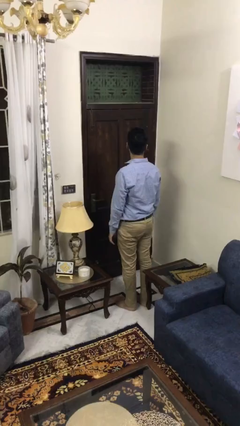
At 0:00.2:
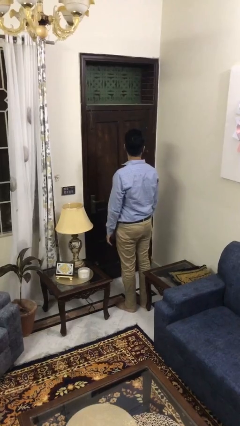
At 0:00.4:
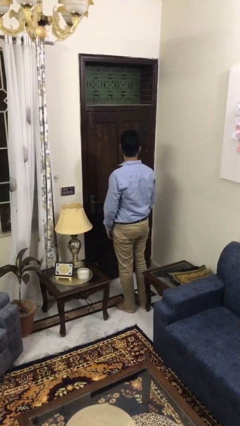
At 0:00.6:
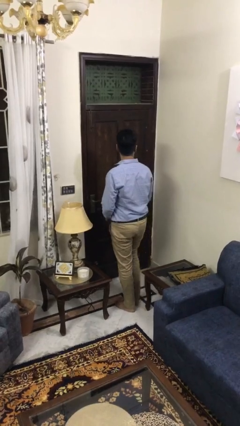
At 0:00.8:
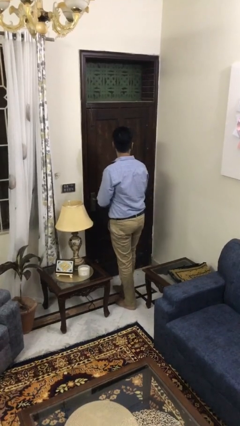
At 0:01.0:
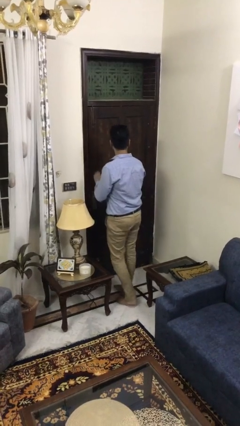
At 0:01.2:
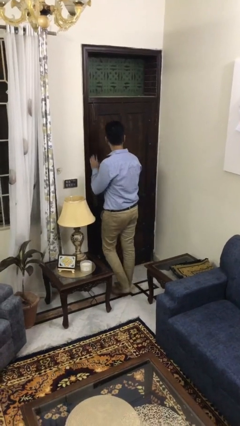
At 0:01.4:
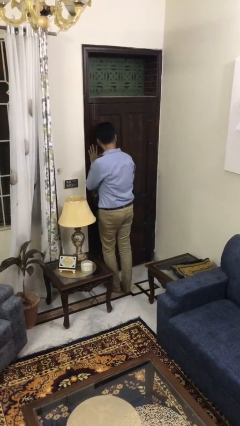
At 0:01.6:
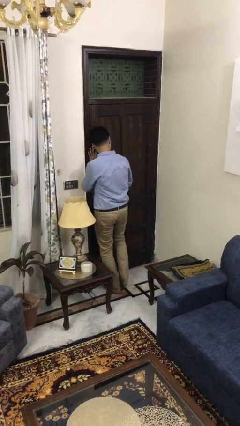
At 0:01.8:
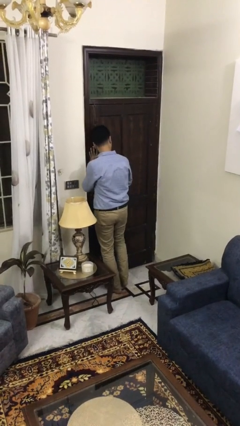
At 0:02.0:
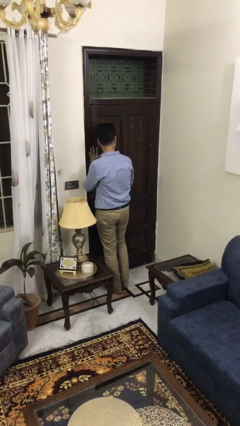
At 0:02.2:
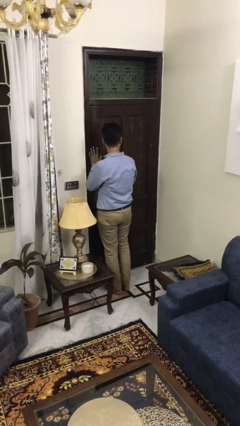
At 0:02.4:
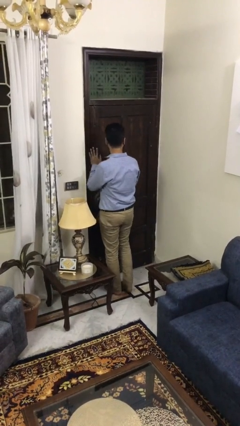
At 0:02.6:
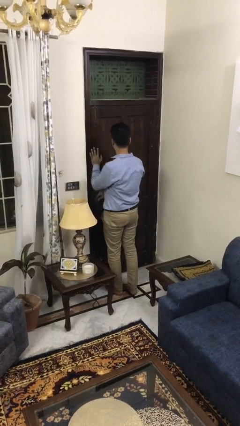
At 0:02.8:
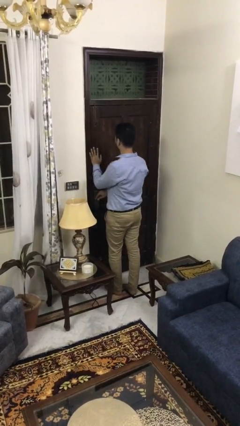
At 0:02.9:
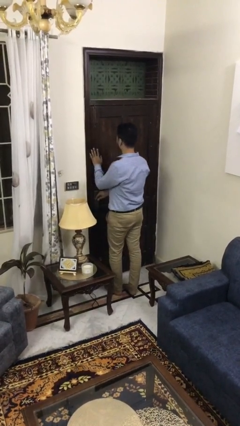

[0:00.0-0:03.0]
person bumps into wall

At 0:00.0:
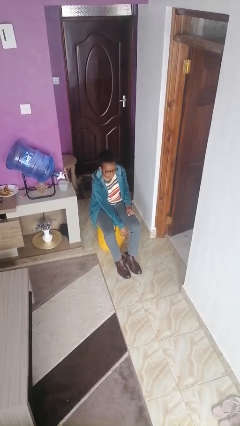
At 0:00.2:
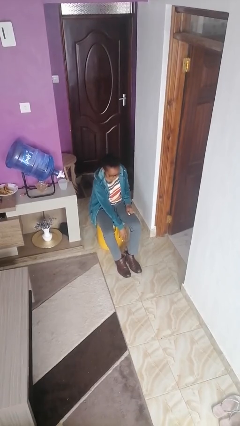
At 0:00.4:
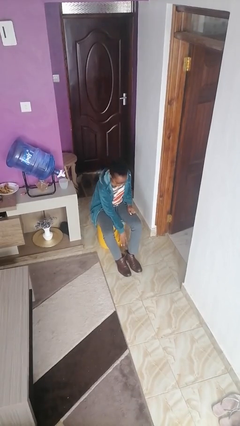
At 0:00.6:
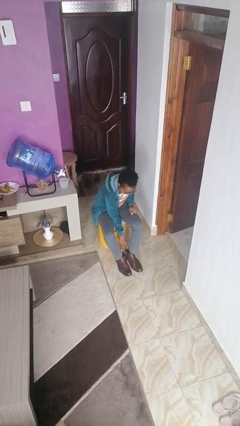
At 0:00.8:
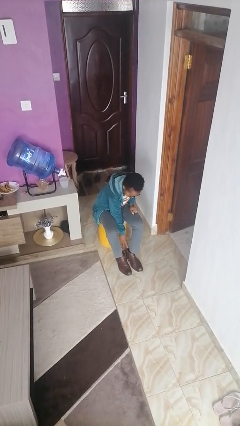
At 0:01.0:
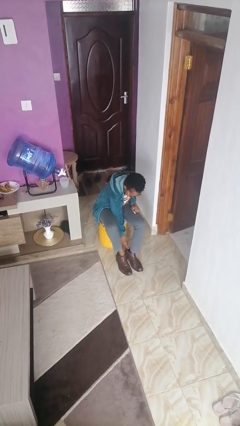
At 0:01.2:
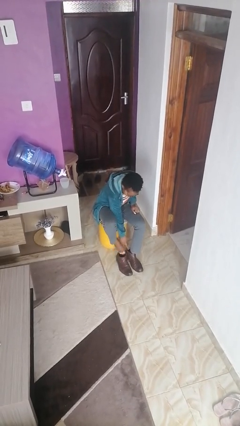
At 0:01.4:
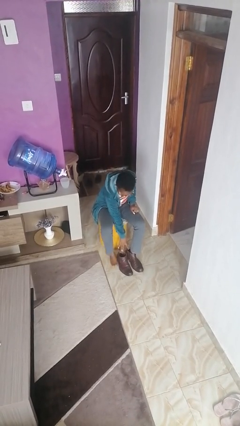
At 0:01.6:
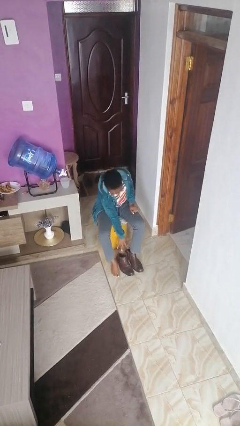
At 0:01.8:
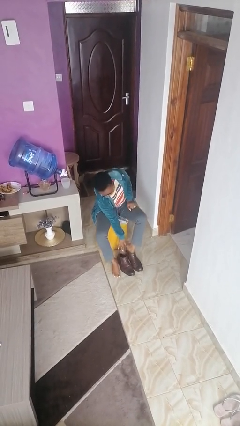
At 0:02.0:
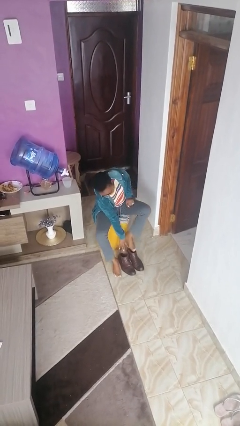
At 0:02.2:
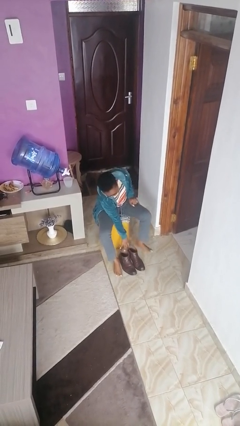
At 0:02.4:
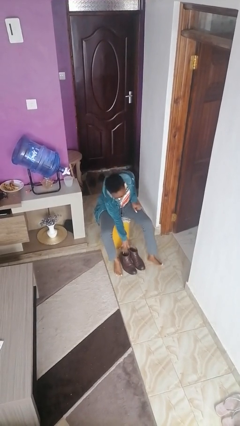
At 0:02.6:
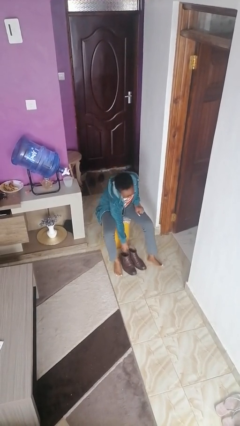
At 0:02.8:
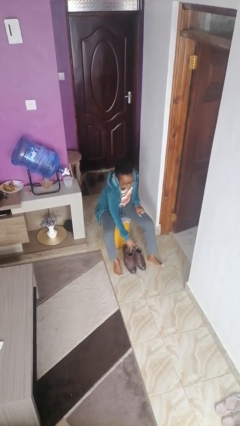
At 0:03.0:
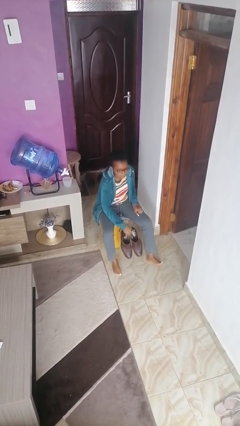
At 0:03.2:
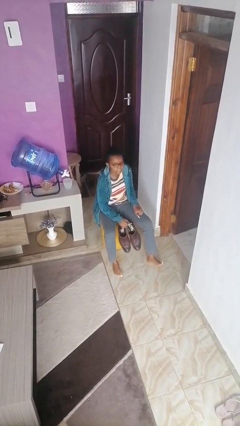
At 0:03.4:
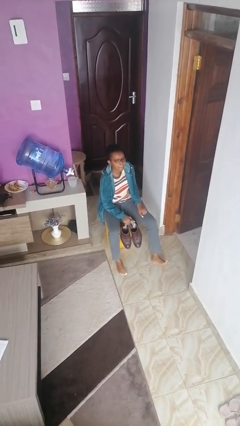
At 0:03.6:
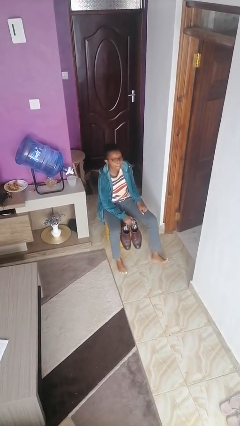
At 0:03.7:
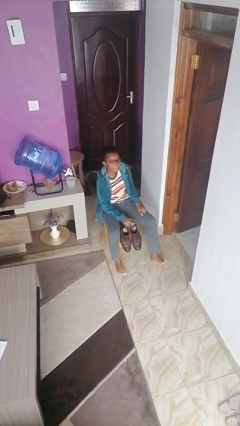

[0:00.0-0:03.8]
person takes off boots

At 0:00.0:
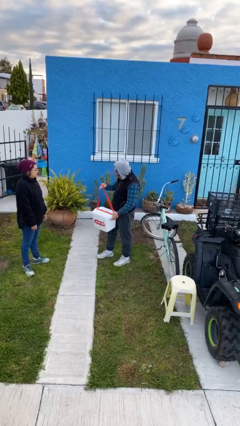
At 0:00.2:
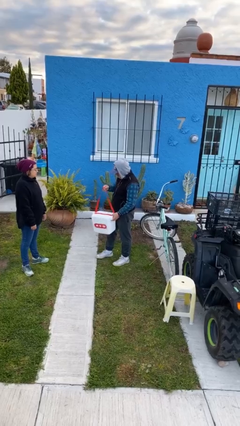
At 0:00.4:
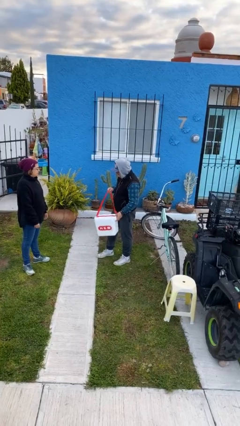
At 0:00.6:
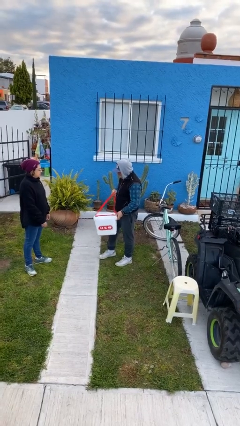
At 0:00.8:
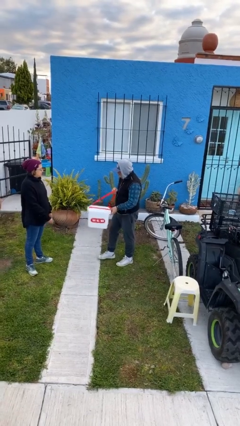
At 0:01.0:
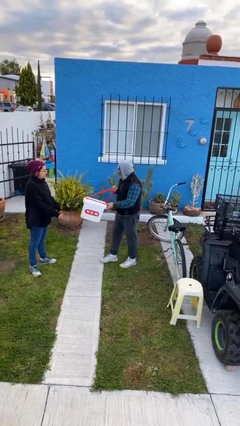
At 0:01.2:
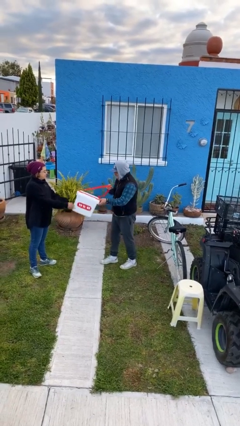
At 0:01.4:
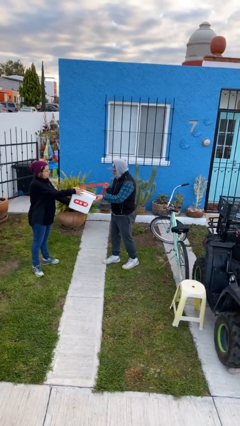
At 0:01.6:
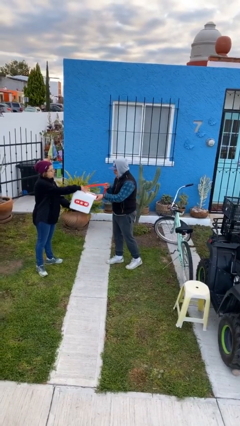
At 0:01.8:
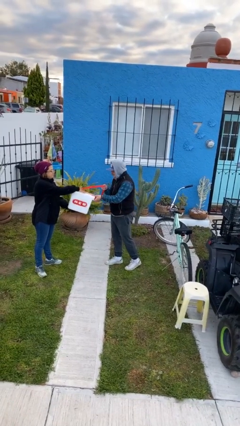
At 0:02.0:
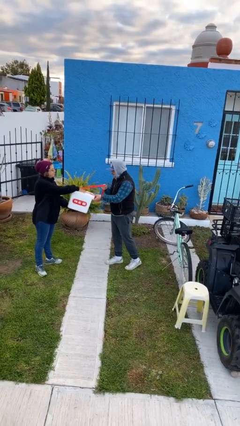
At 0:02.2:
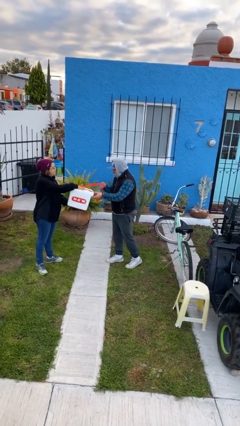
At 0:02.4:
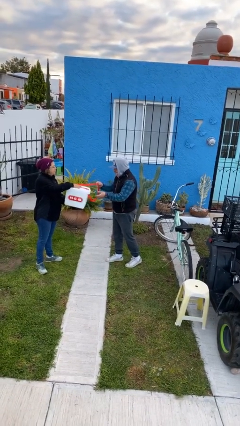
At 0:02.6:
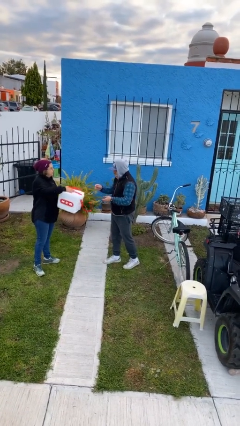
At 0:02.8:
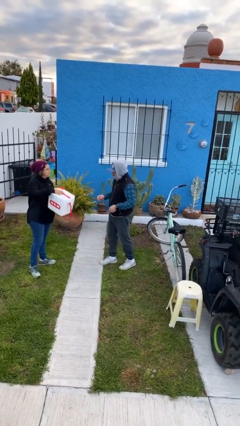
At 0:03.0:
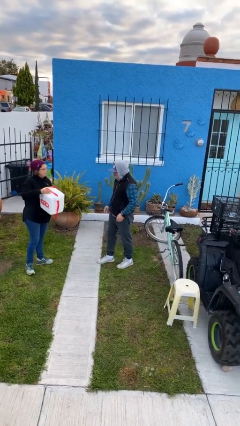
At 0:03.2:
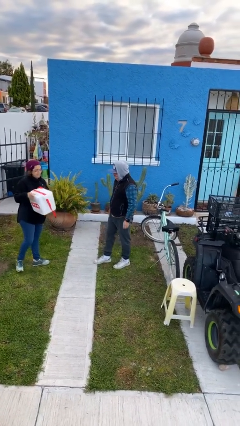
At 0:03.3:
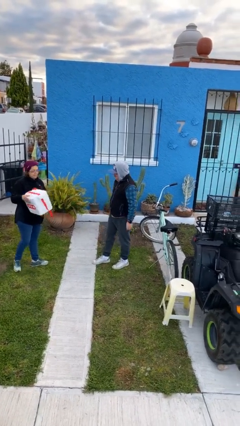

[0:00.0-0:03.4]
person transfers object to person

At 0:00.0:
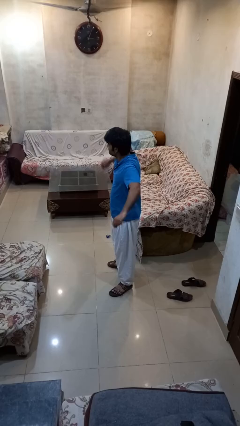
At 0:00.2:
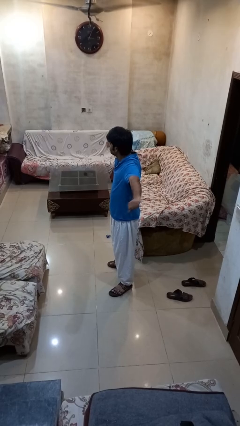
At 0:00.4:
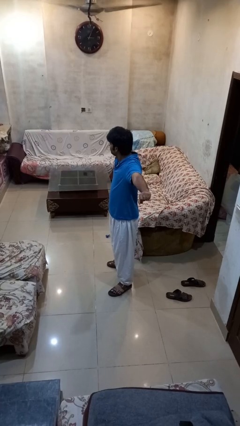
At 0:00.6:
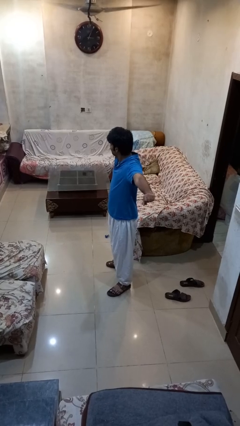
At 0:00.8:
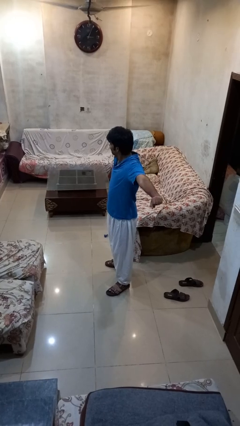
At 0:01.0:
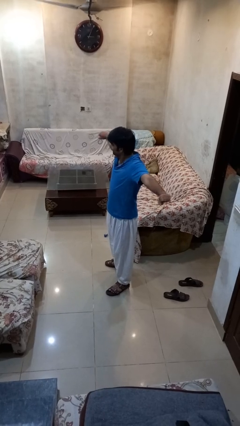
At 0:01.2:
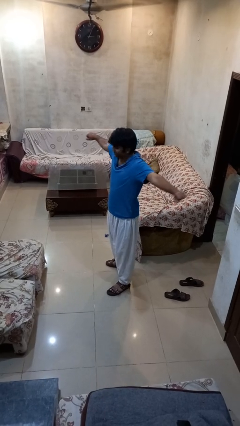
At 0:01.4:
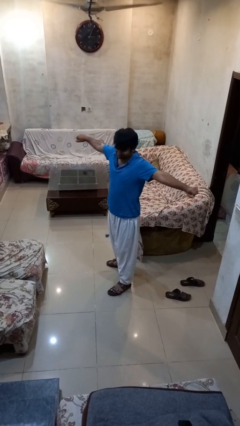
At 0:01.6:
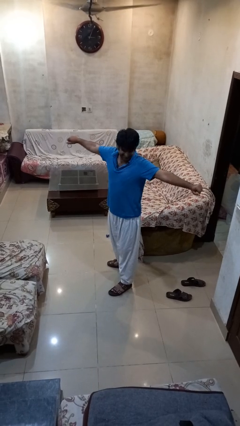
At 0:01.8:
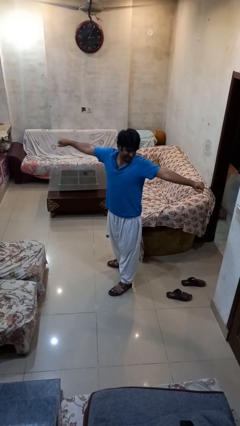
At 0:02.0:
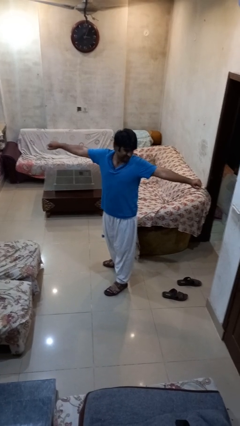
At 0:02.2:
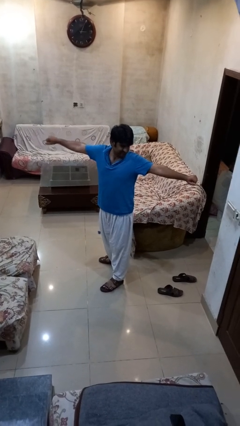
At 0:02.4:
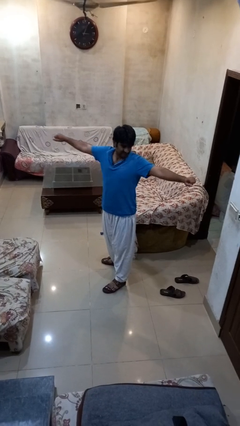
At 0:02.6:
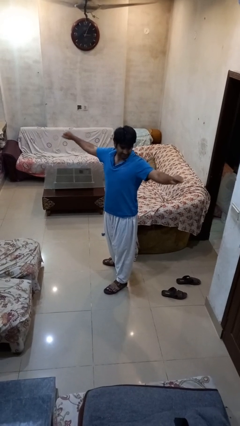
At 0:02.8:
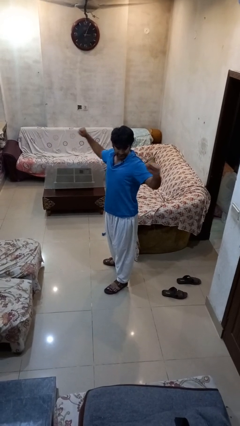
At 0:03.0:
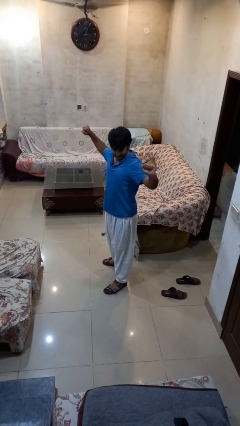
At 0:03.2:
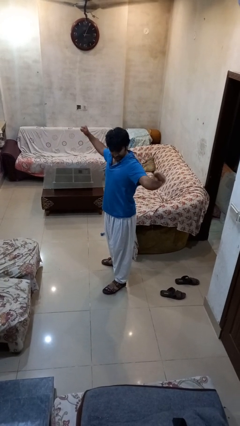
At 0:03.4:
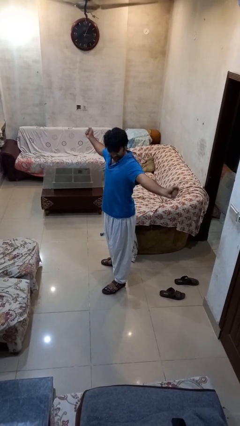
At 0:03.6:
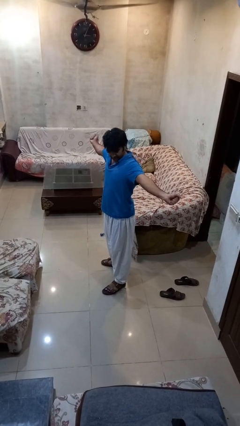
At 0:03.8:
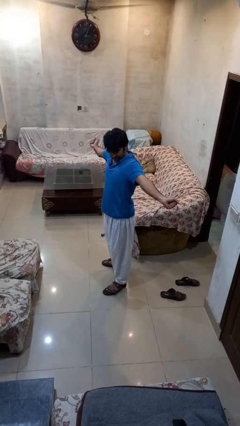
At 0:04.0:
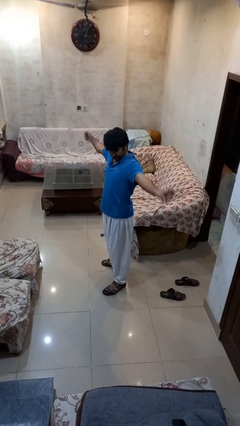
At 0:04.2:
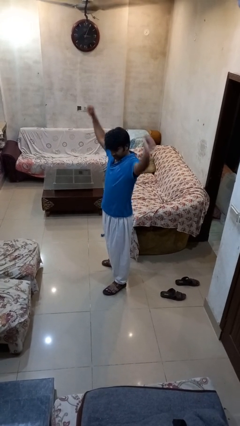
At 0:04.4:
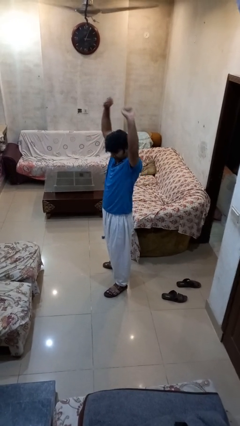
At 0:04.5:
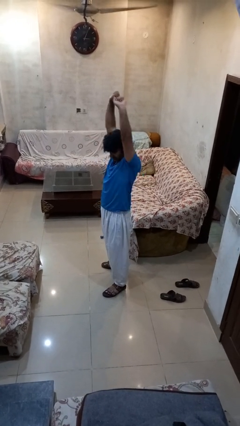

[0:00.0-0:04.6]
person stretches arms to side

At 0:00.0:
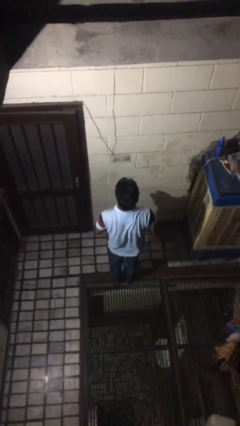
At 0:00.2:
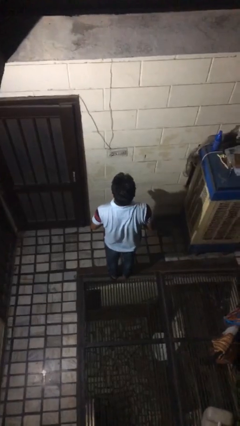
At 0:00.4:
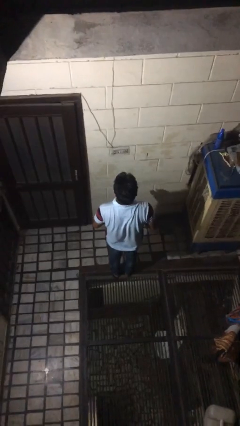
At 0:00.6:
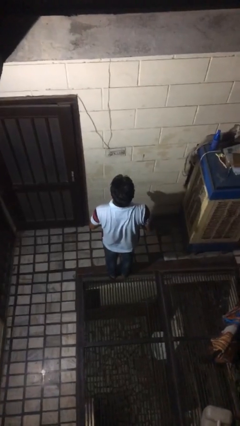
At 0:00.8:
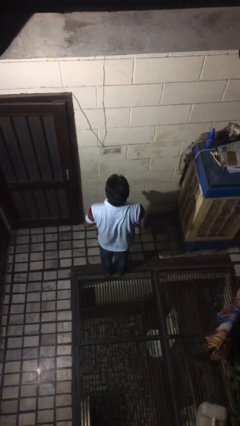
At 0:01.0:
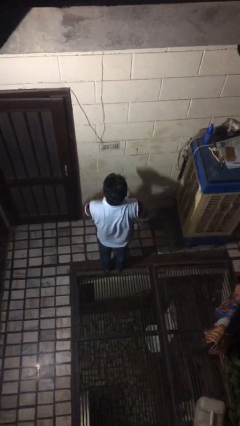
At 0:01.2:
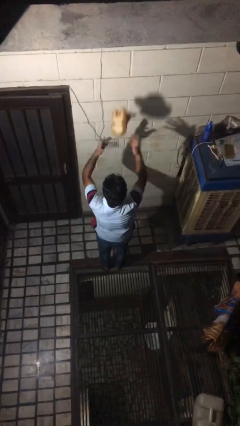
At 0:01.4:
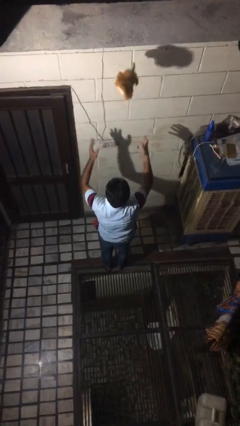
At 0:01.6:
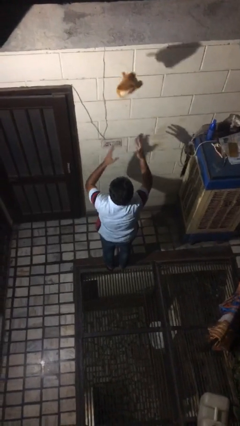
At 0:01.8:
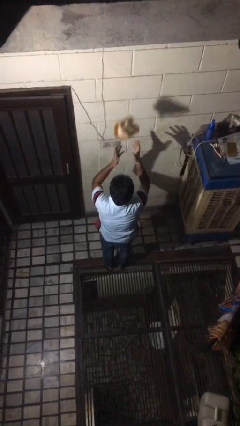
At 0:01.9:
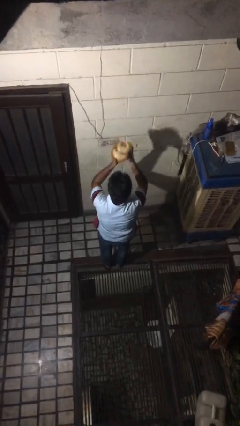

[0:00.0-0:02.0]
person drops object

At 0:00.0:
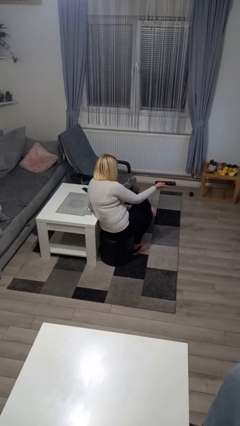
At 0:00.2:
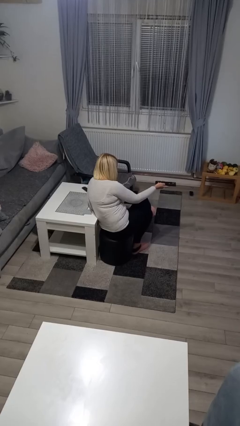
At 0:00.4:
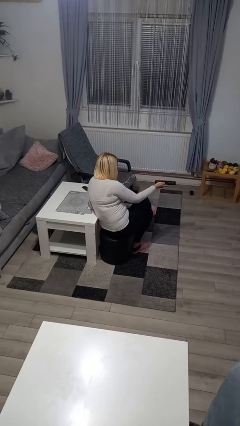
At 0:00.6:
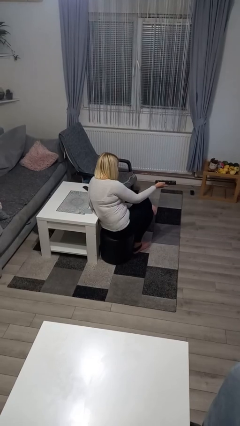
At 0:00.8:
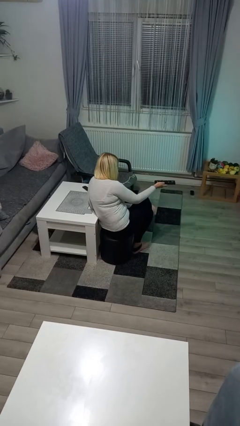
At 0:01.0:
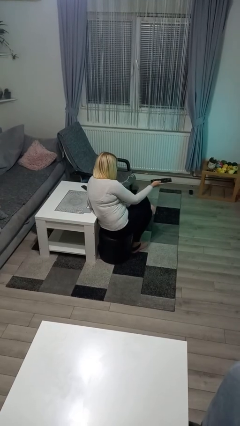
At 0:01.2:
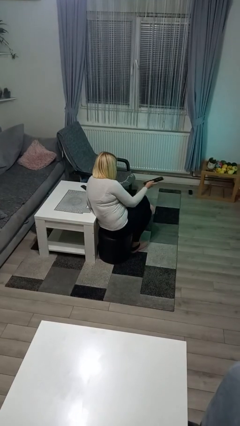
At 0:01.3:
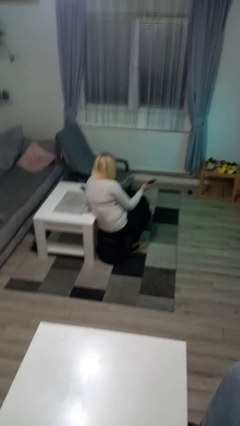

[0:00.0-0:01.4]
person uses television remote
